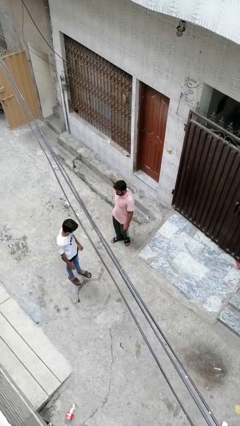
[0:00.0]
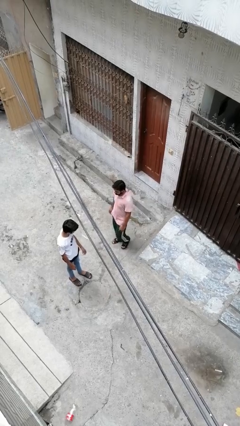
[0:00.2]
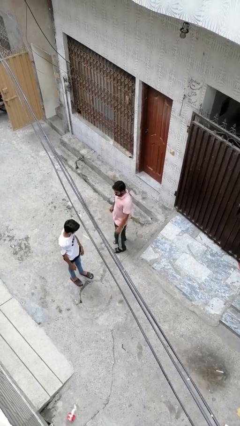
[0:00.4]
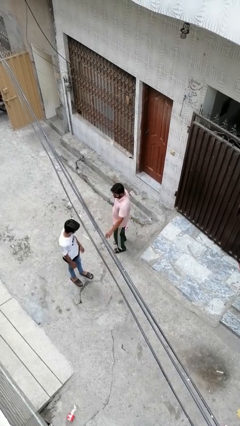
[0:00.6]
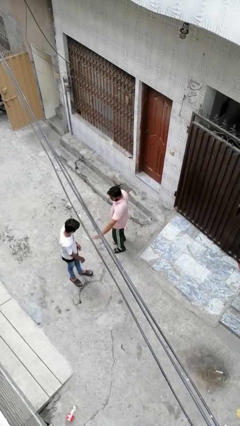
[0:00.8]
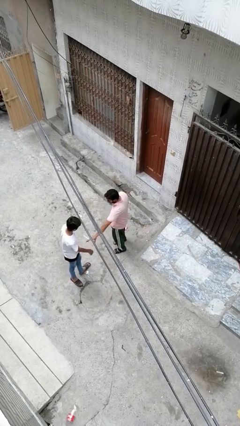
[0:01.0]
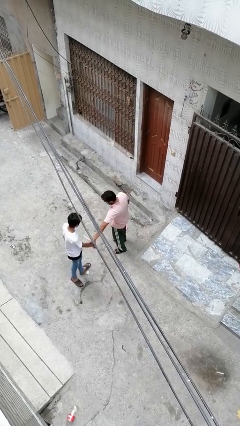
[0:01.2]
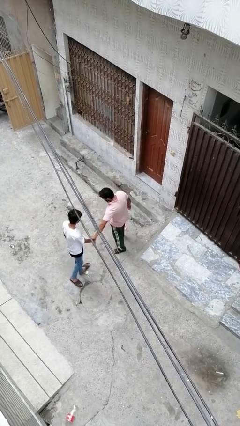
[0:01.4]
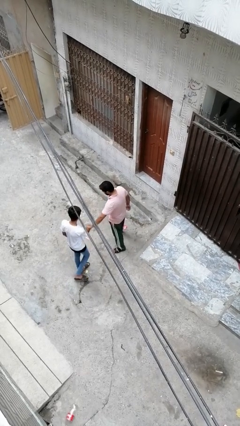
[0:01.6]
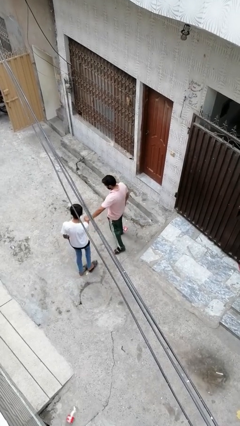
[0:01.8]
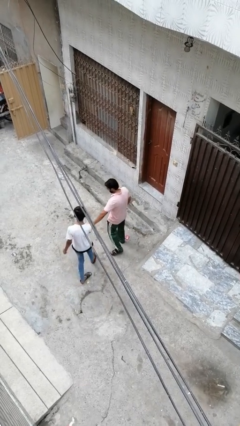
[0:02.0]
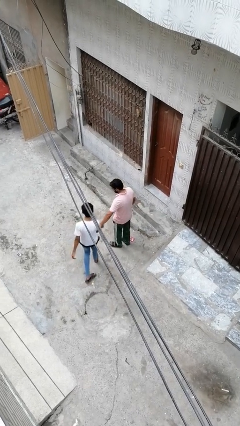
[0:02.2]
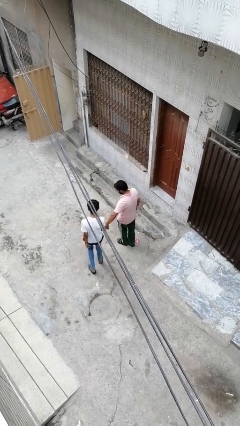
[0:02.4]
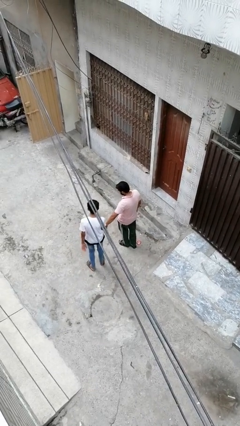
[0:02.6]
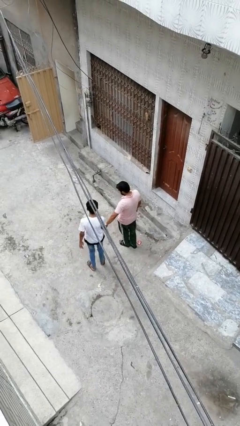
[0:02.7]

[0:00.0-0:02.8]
person grabs person by forearm

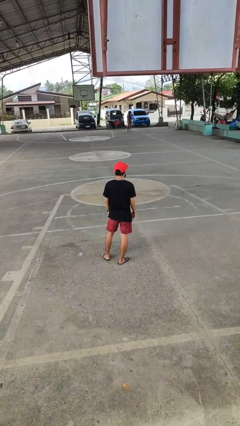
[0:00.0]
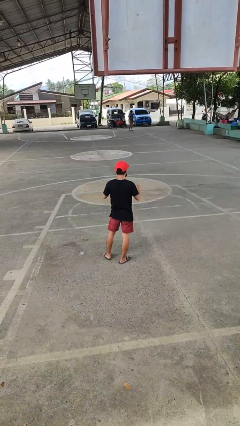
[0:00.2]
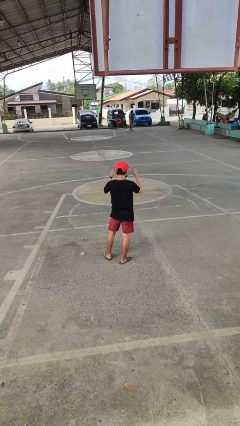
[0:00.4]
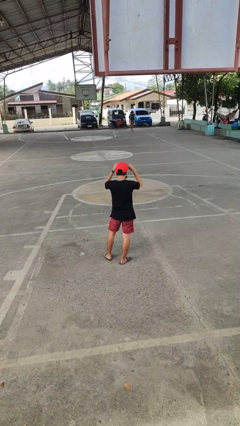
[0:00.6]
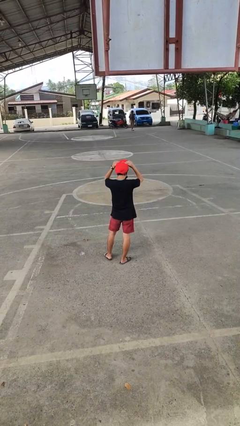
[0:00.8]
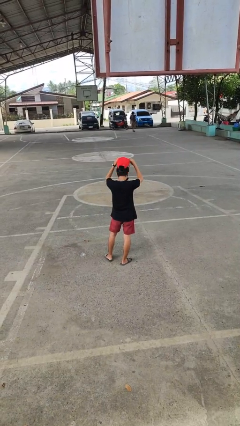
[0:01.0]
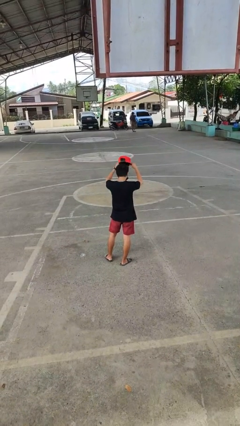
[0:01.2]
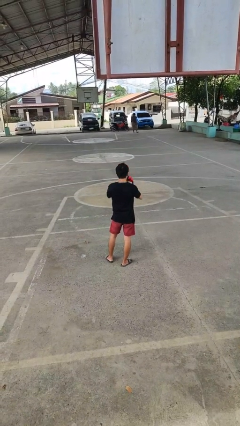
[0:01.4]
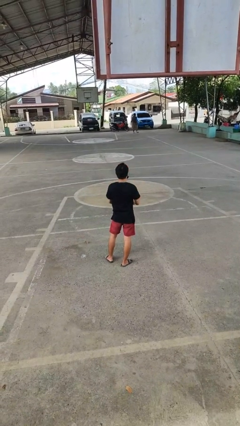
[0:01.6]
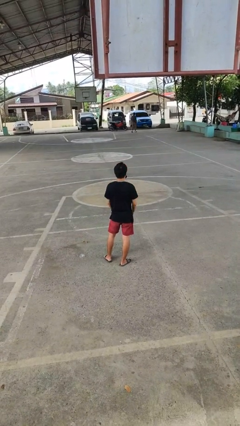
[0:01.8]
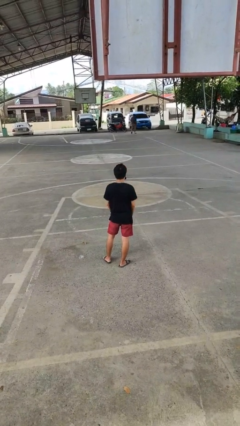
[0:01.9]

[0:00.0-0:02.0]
person takes off hat

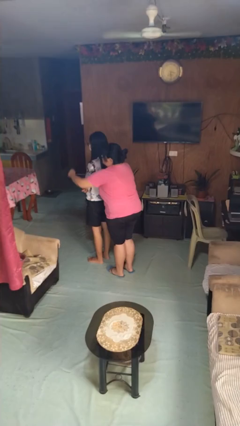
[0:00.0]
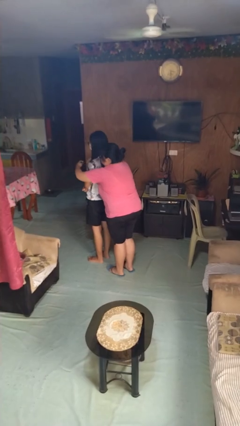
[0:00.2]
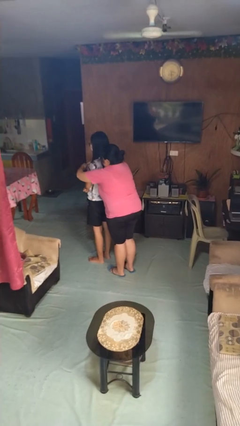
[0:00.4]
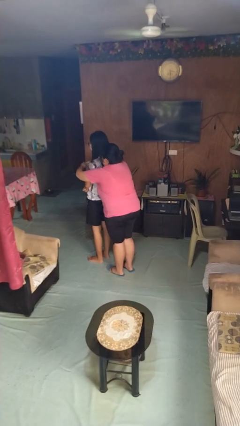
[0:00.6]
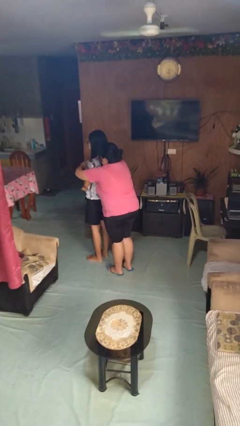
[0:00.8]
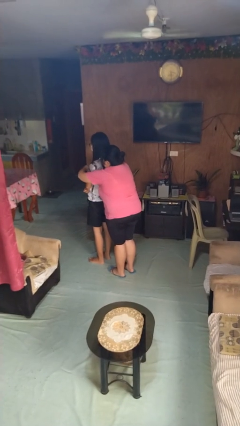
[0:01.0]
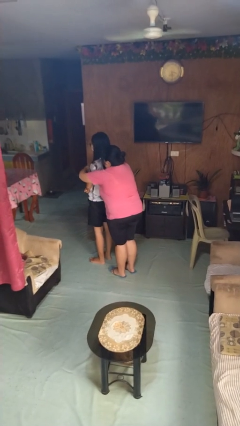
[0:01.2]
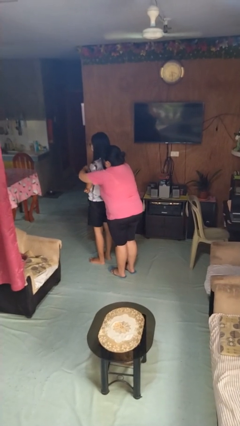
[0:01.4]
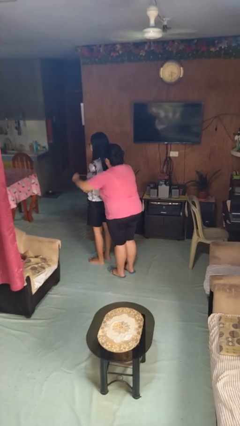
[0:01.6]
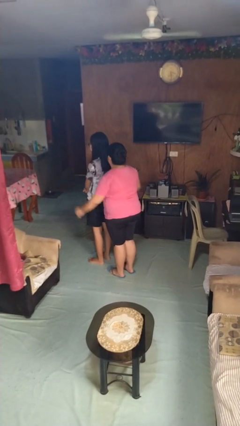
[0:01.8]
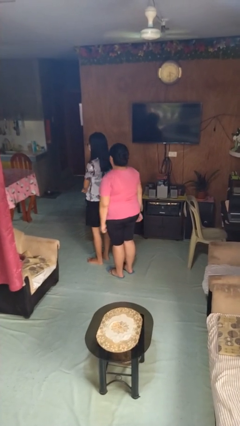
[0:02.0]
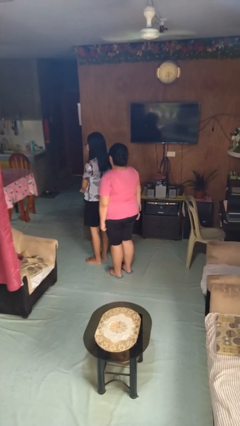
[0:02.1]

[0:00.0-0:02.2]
person hugs person from behind

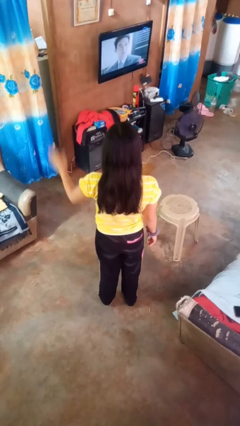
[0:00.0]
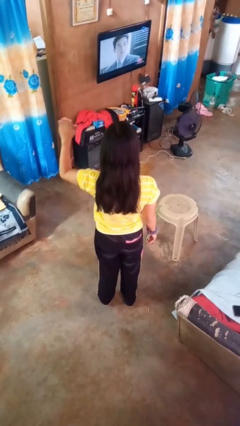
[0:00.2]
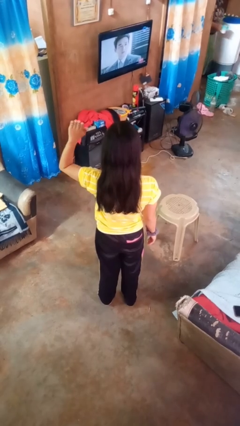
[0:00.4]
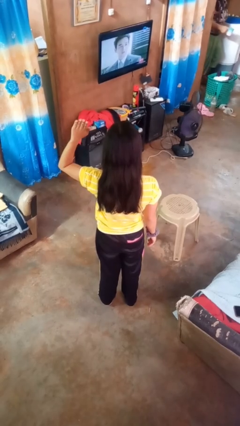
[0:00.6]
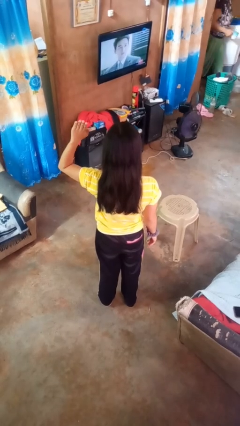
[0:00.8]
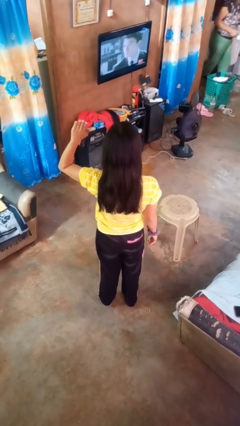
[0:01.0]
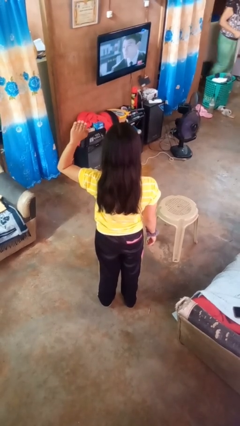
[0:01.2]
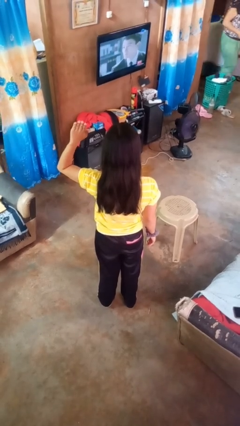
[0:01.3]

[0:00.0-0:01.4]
person gestures number five

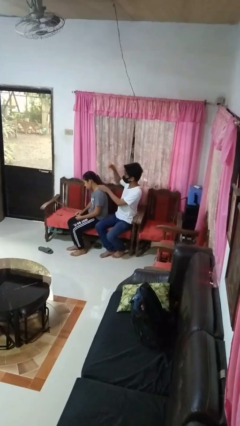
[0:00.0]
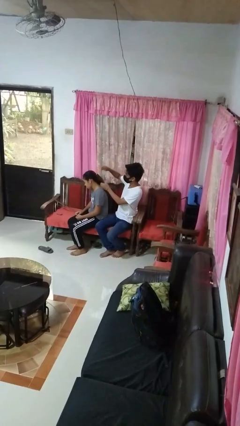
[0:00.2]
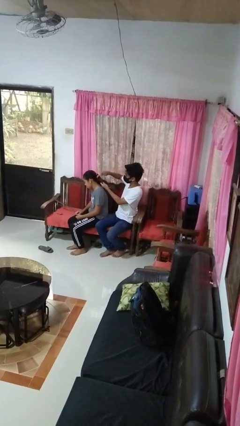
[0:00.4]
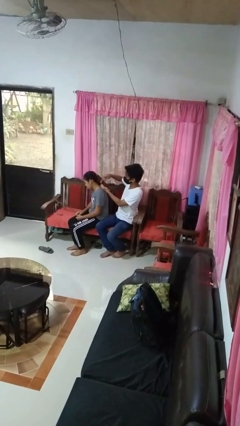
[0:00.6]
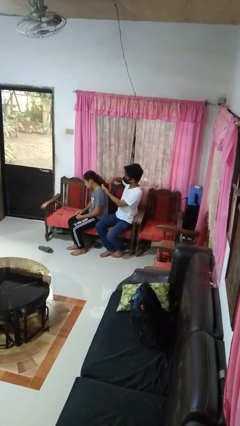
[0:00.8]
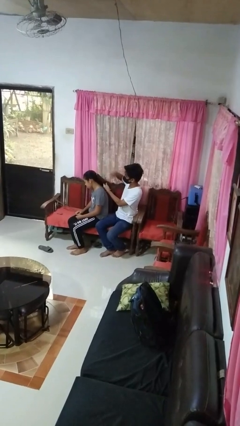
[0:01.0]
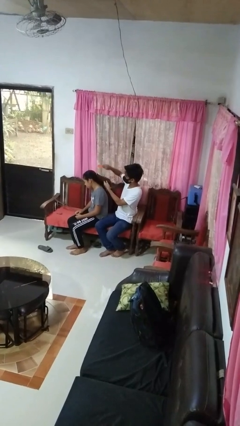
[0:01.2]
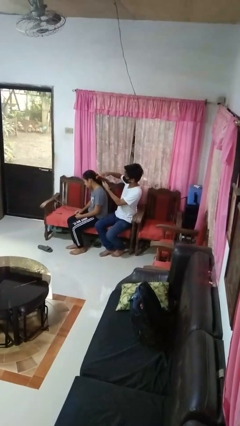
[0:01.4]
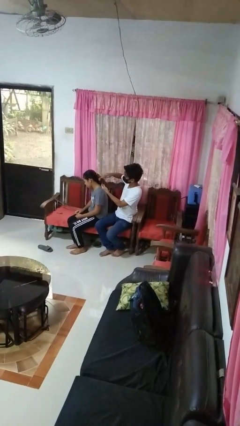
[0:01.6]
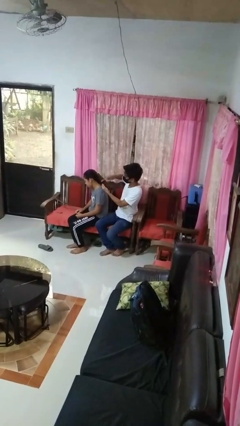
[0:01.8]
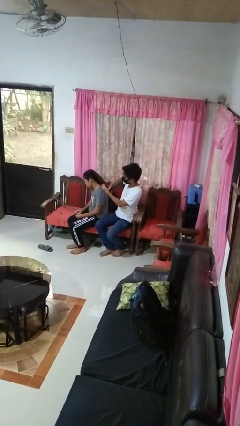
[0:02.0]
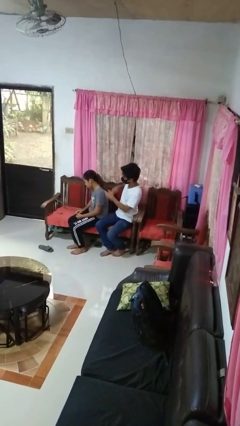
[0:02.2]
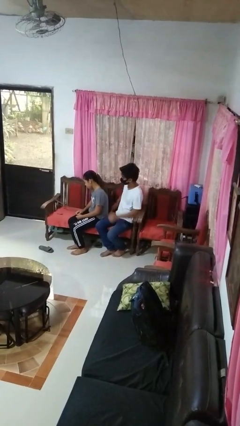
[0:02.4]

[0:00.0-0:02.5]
person brushes hair of person

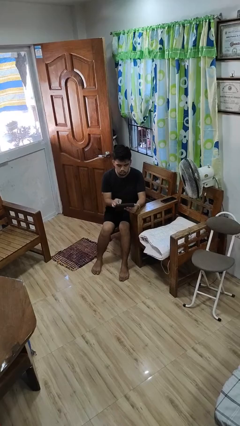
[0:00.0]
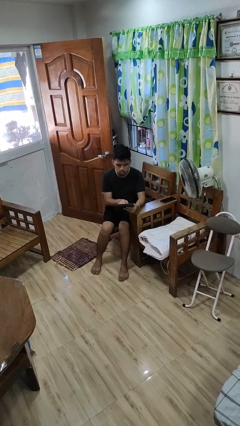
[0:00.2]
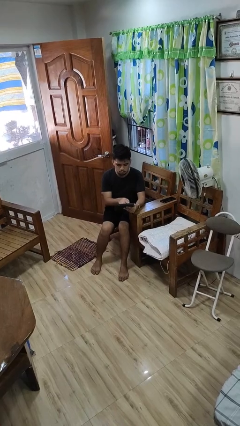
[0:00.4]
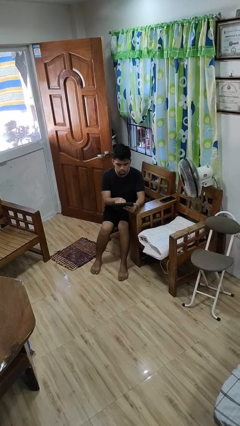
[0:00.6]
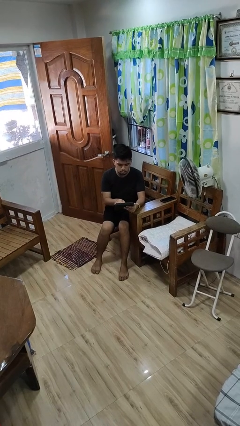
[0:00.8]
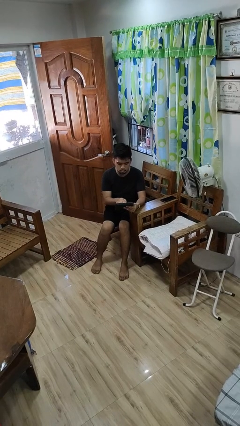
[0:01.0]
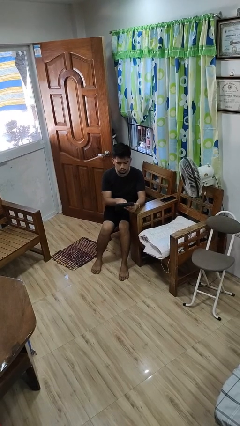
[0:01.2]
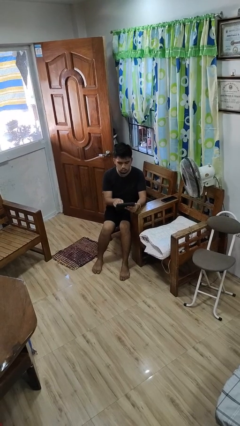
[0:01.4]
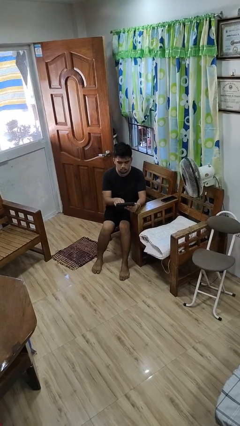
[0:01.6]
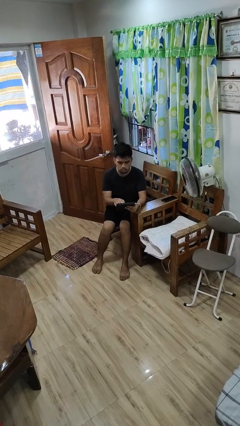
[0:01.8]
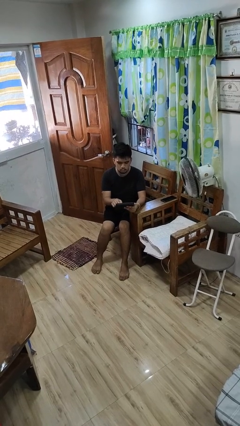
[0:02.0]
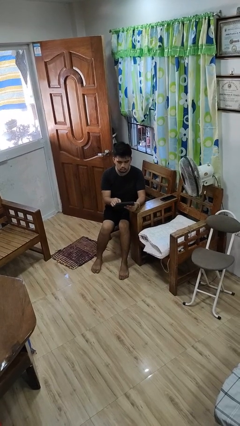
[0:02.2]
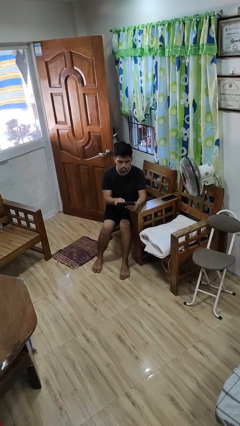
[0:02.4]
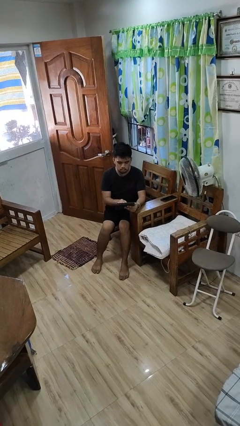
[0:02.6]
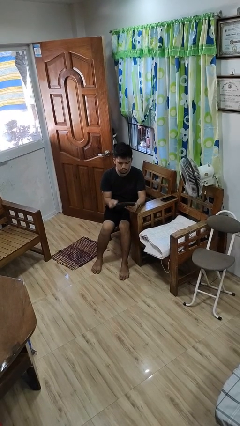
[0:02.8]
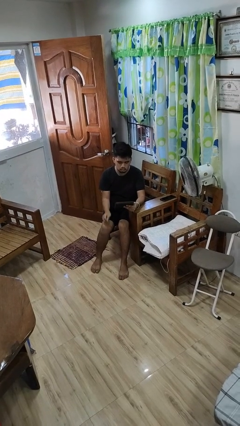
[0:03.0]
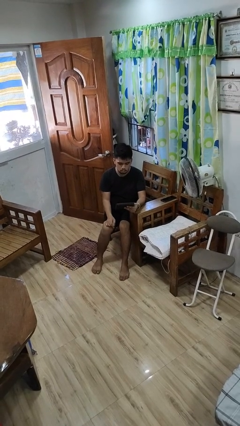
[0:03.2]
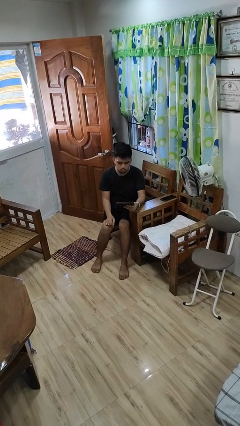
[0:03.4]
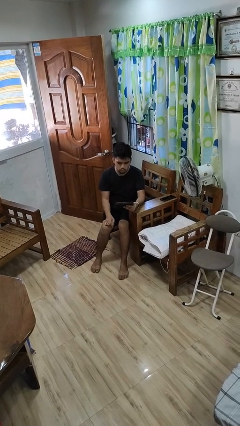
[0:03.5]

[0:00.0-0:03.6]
person interacts with tablet

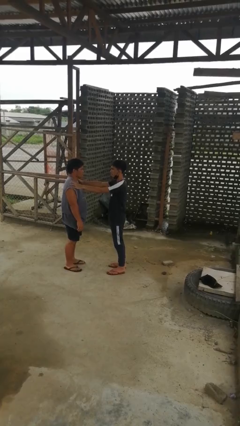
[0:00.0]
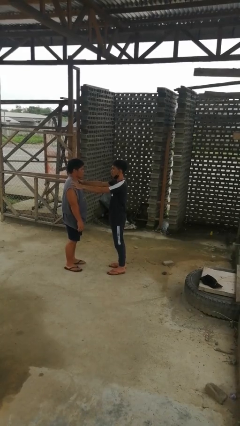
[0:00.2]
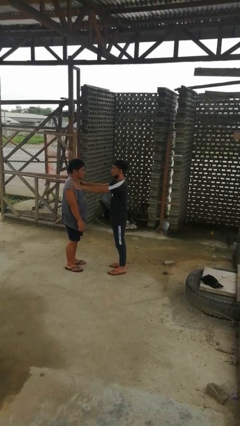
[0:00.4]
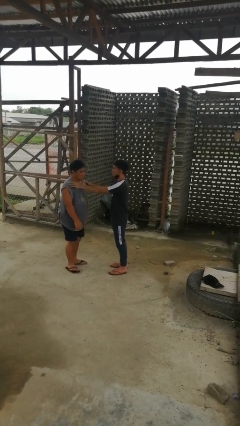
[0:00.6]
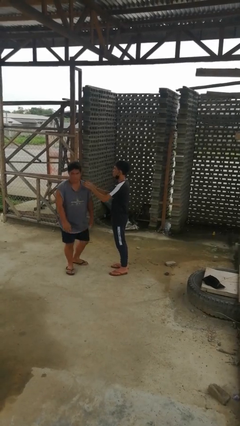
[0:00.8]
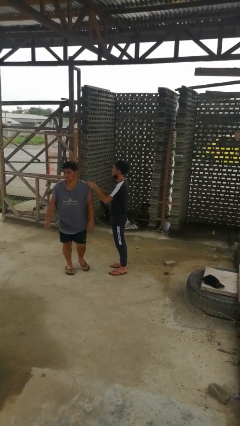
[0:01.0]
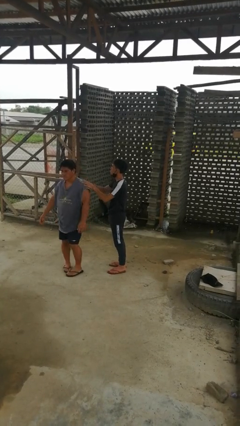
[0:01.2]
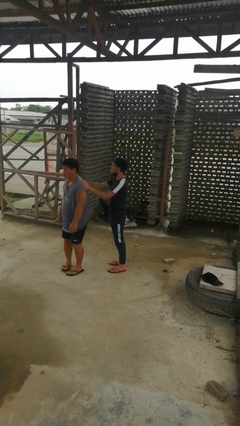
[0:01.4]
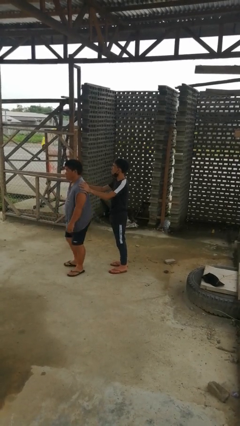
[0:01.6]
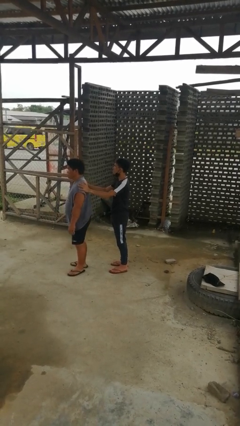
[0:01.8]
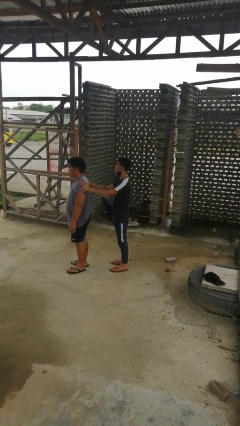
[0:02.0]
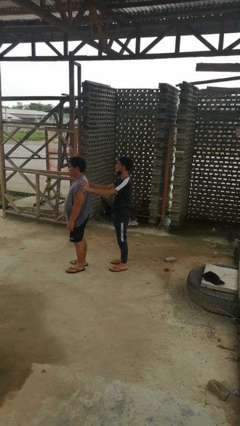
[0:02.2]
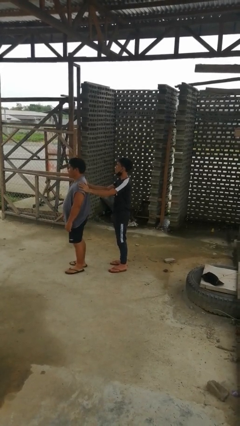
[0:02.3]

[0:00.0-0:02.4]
person spins person around
